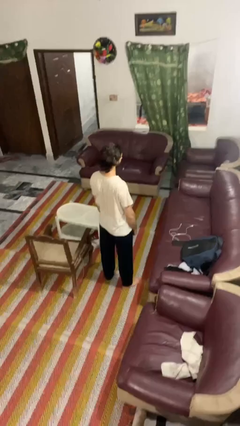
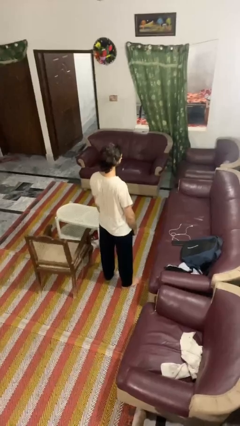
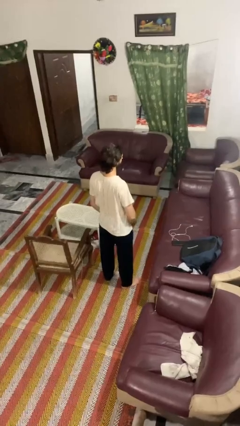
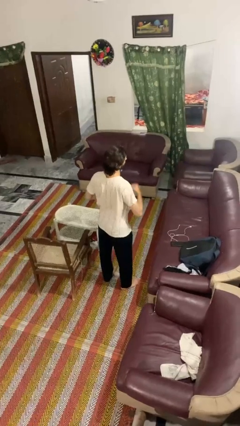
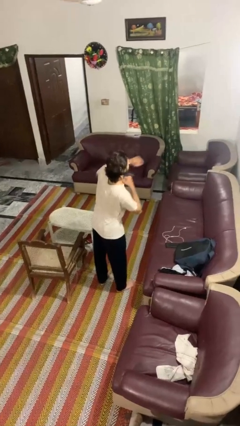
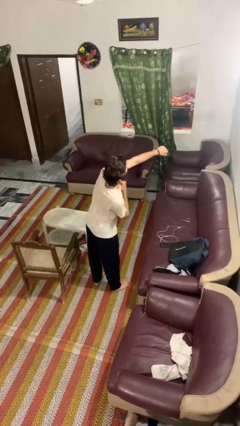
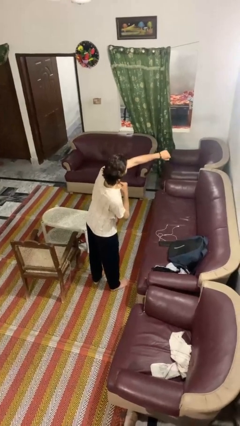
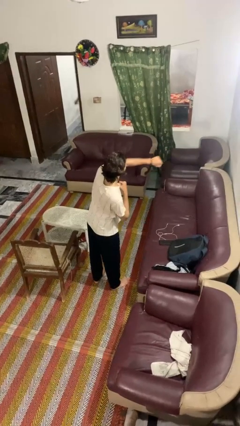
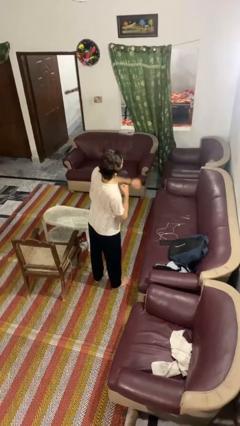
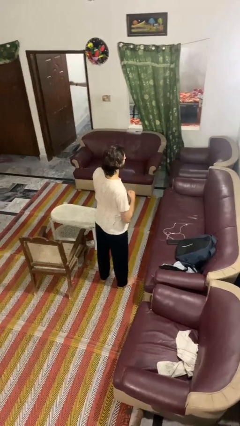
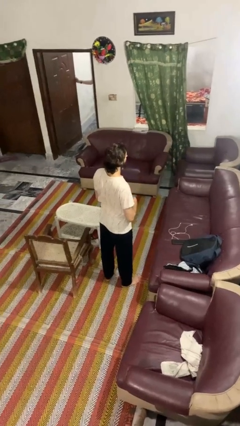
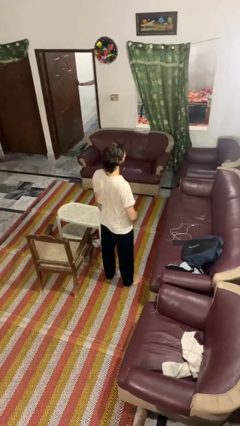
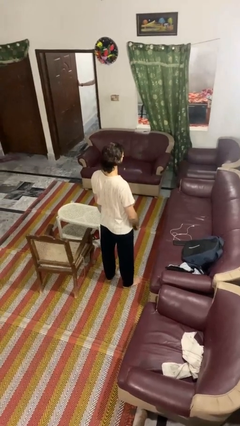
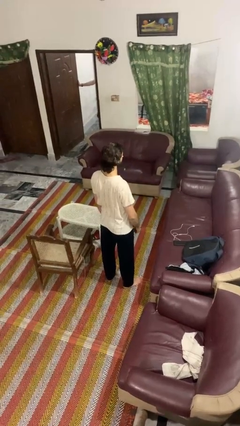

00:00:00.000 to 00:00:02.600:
person punches

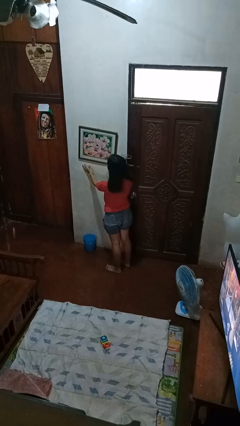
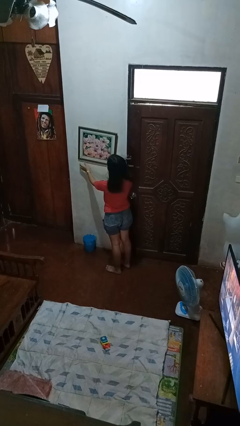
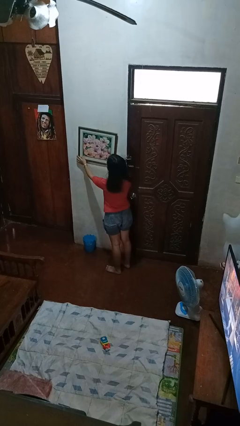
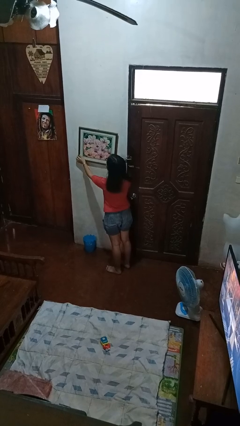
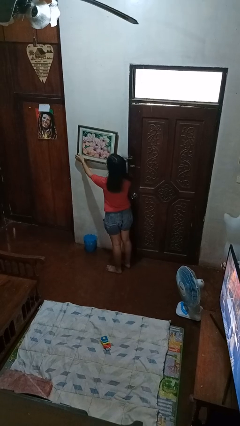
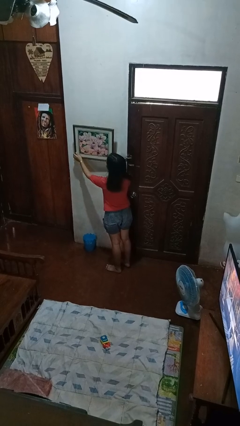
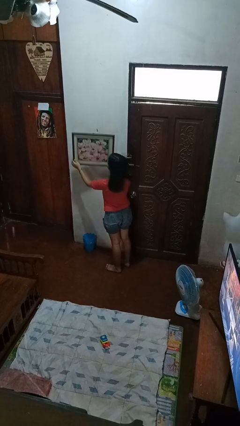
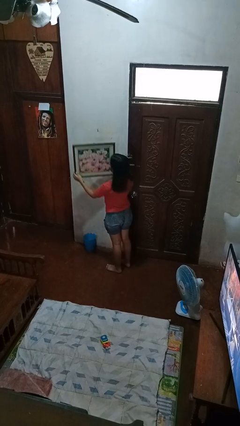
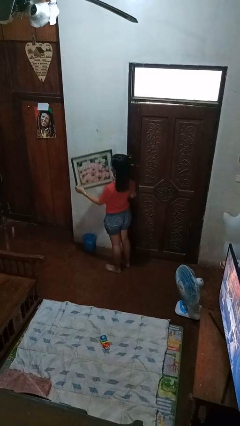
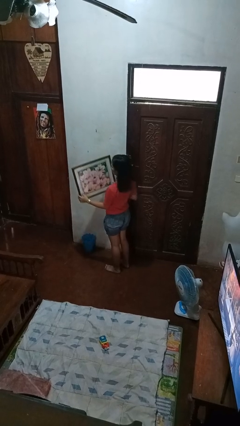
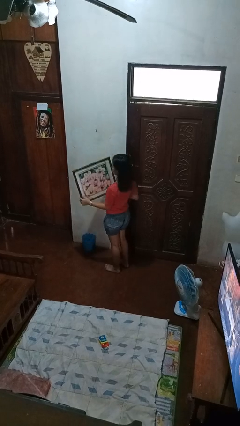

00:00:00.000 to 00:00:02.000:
person takes down picture frame

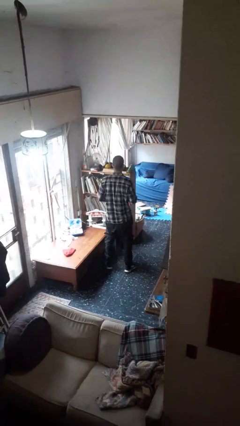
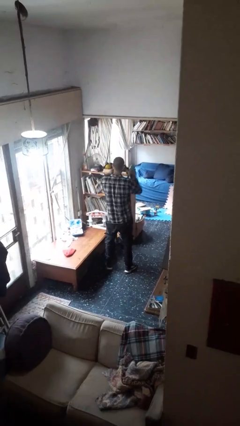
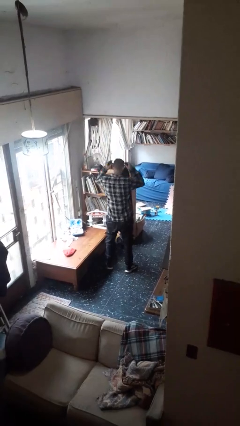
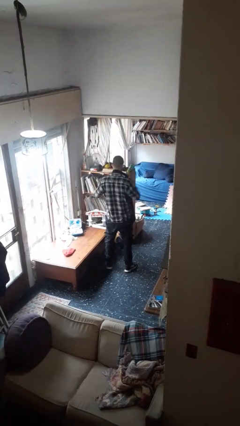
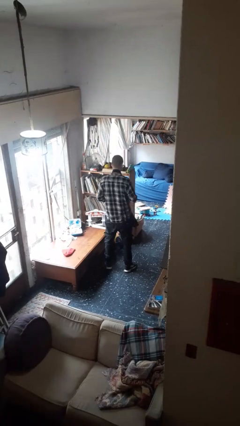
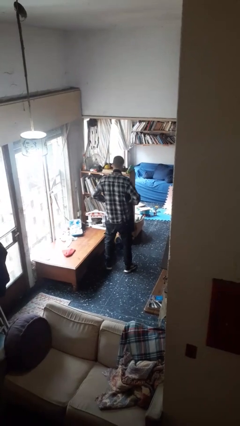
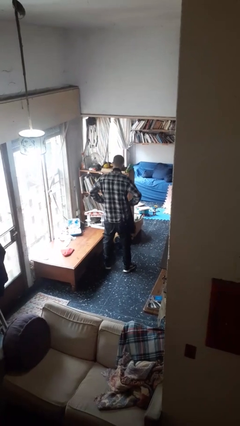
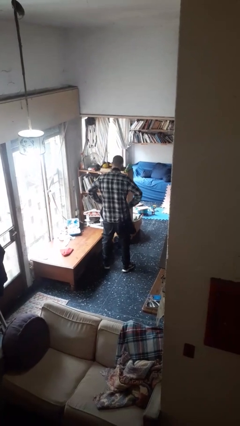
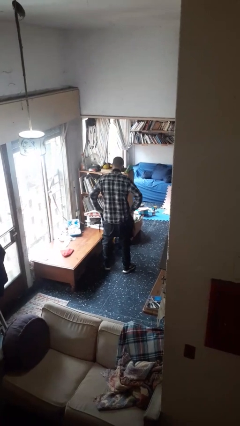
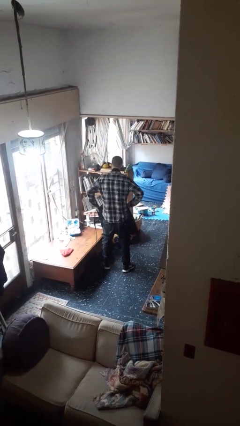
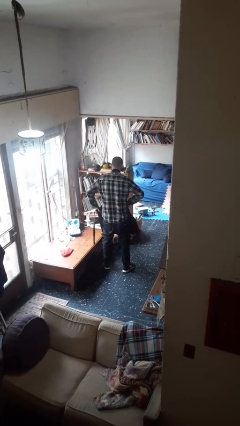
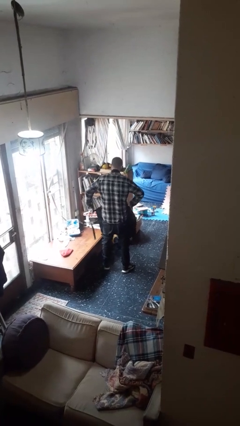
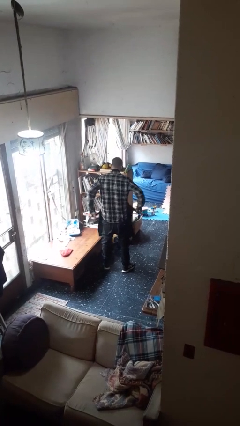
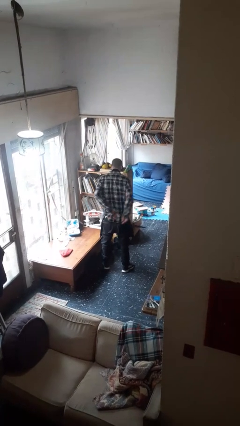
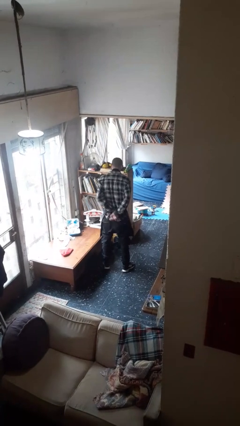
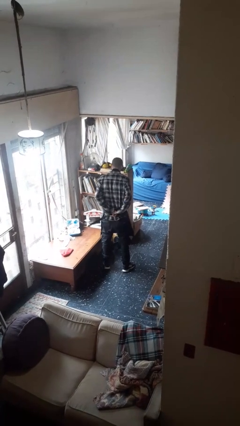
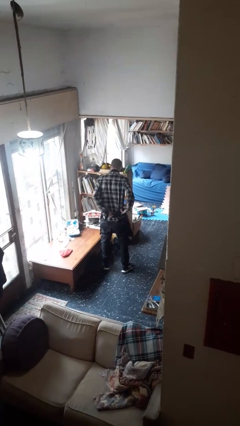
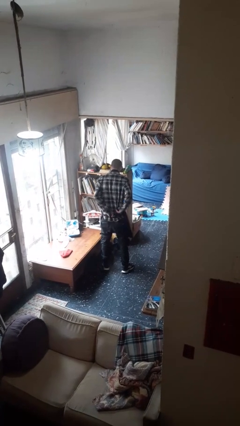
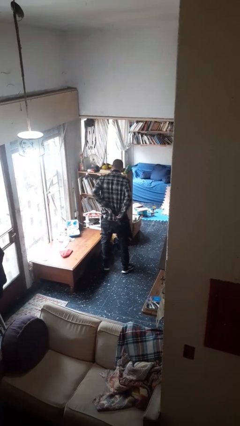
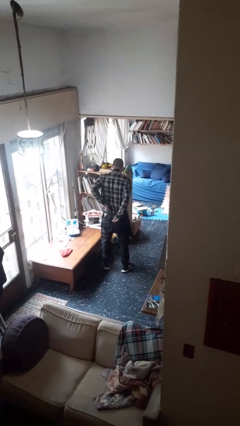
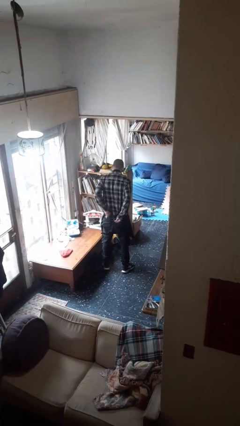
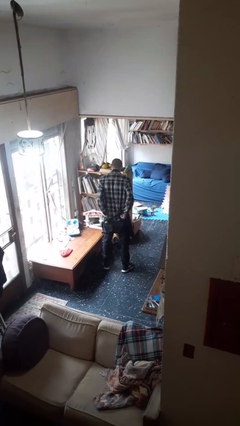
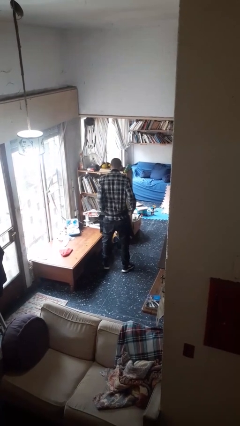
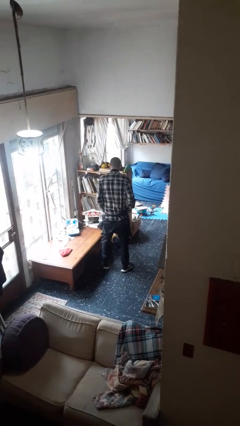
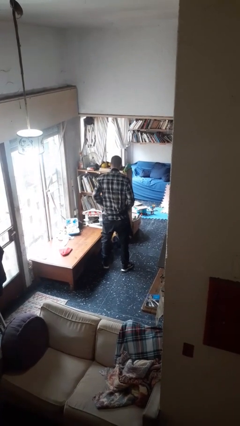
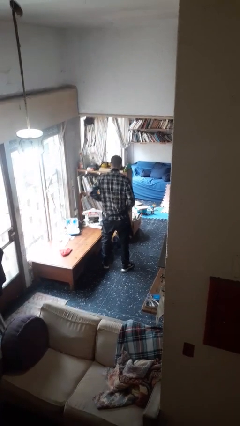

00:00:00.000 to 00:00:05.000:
person puts on apron

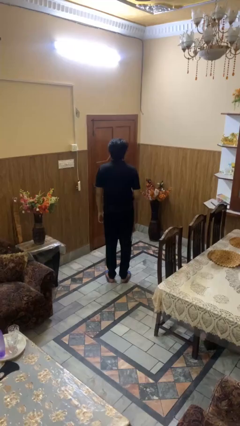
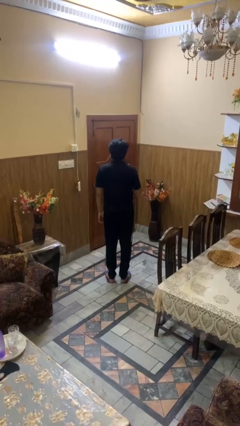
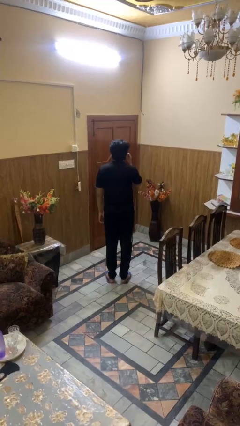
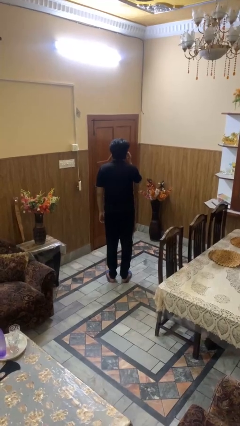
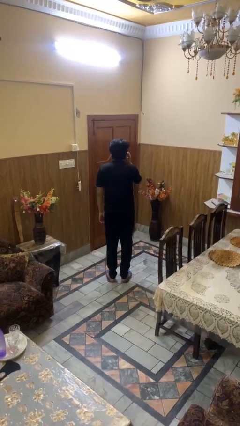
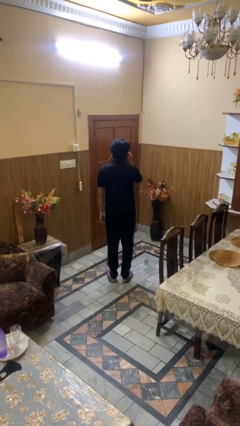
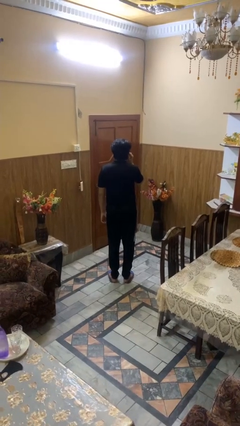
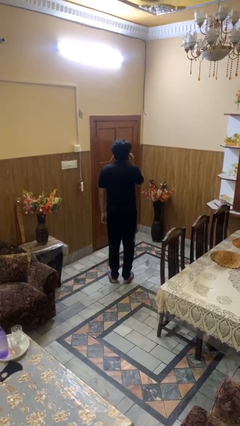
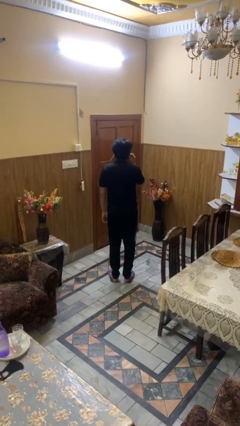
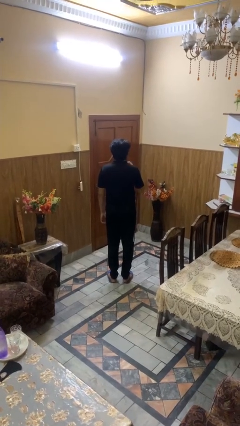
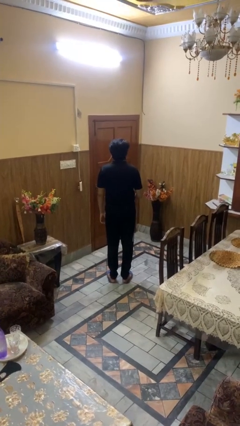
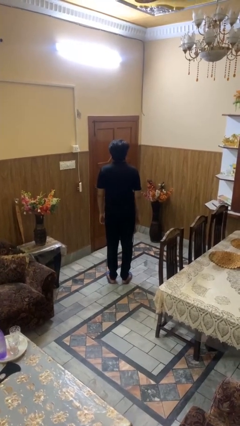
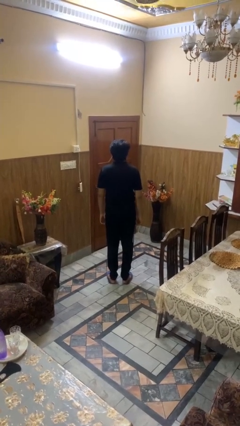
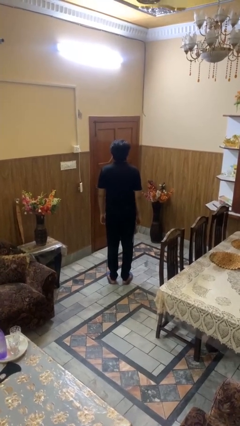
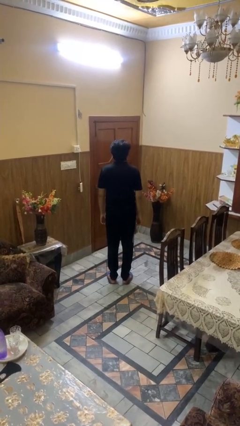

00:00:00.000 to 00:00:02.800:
person touches earlobe

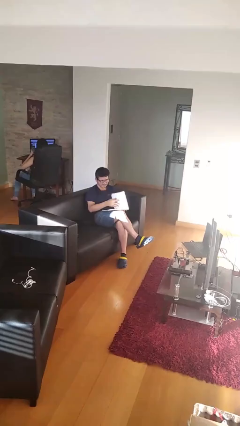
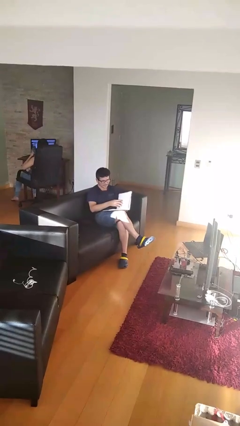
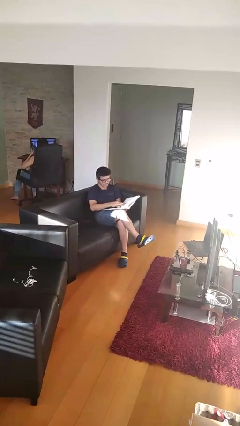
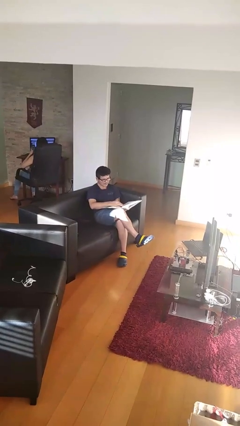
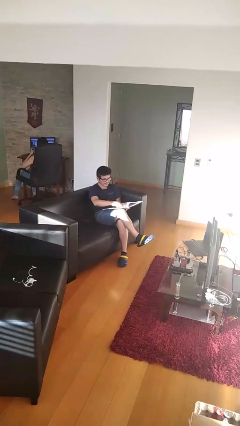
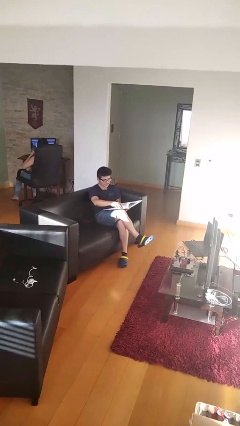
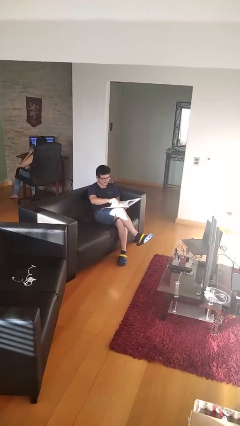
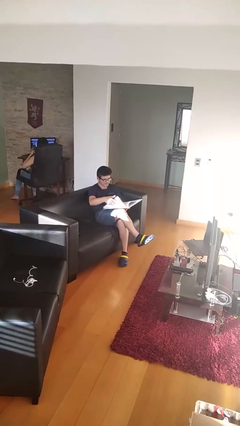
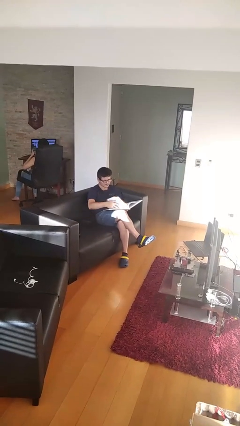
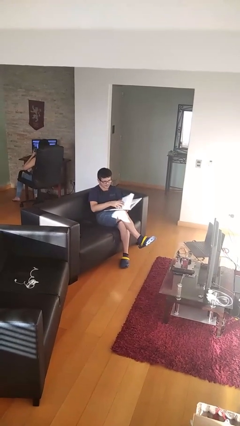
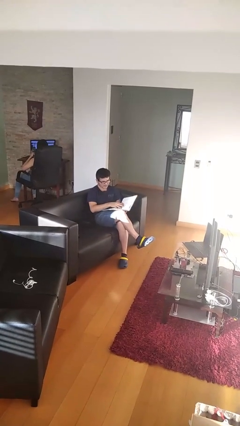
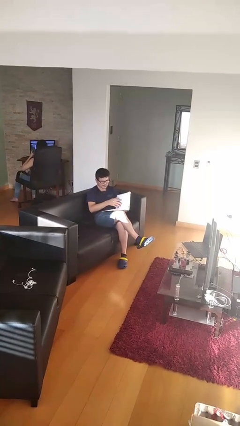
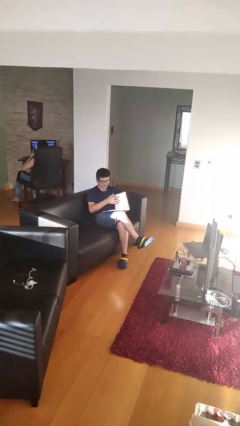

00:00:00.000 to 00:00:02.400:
person reads document

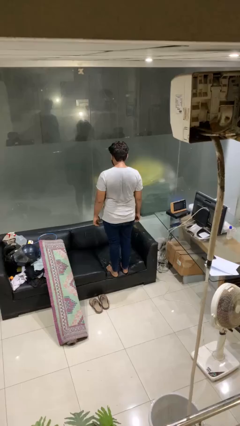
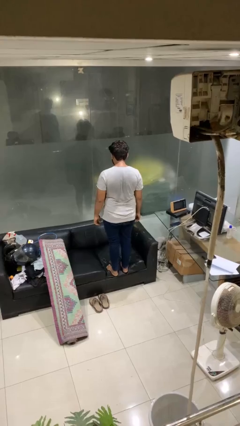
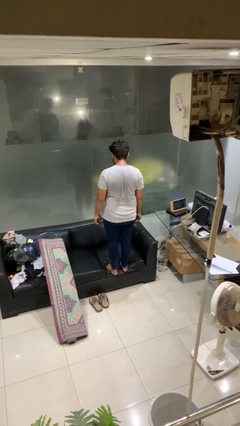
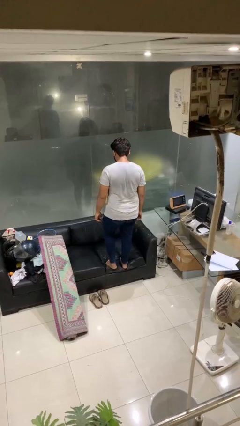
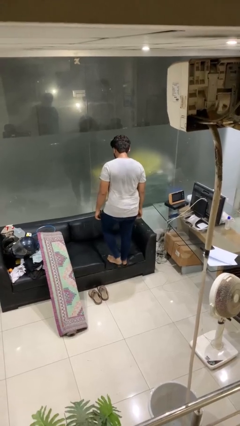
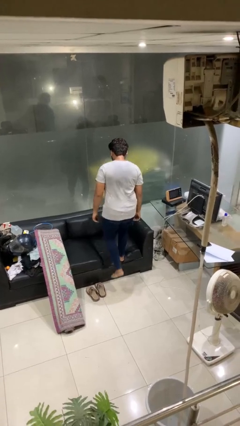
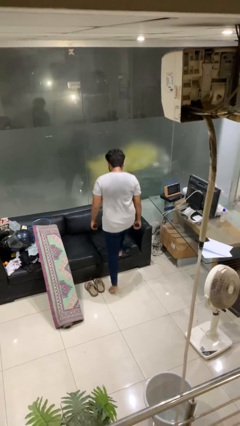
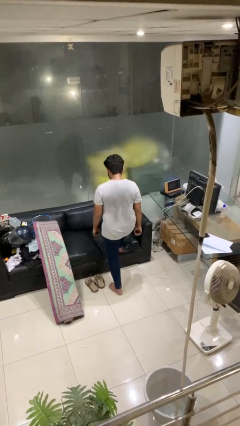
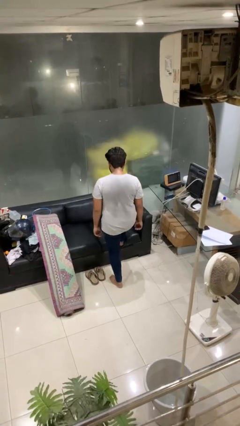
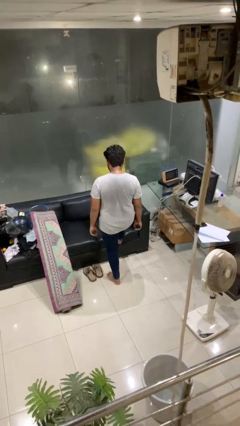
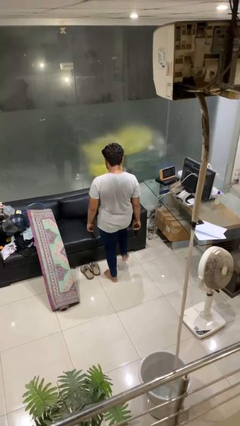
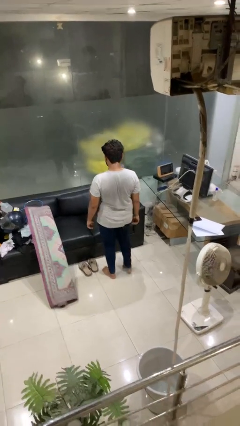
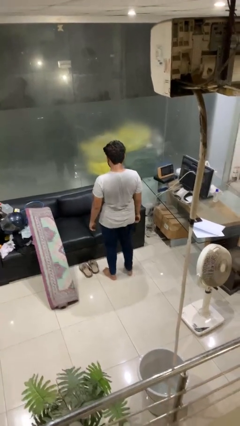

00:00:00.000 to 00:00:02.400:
person climbs off couch

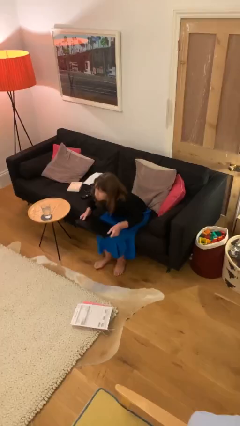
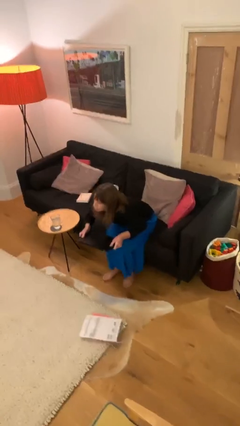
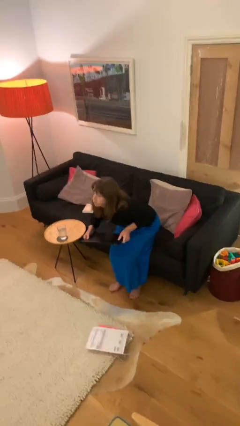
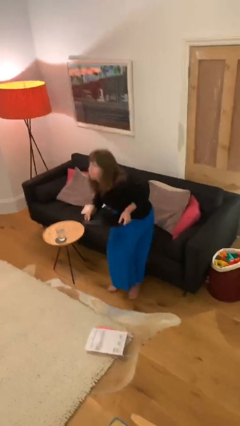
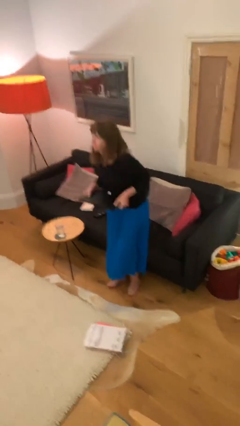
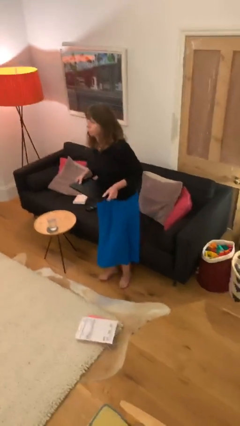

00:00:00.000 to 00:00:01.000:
person stands up
